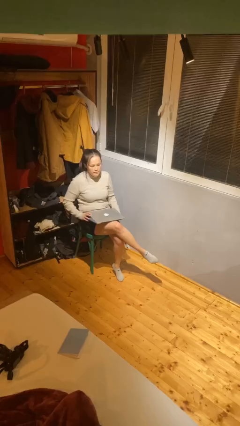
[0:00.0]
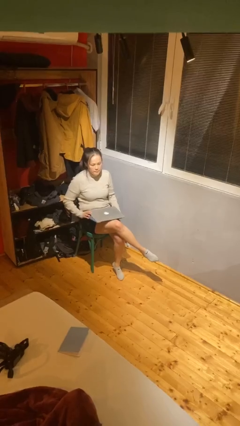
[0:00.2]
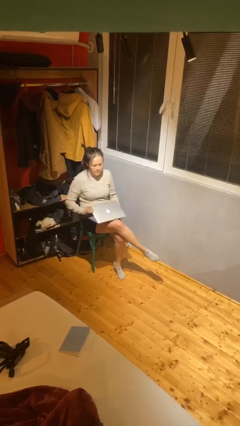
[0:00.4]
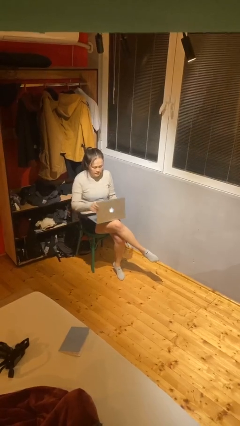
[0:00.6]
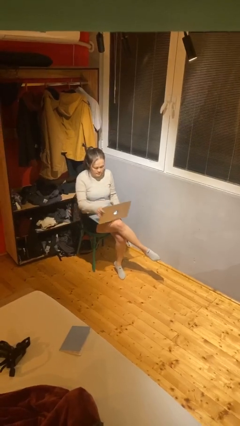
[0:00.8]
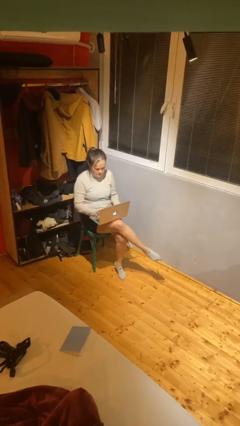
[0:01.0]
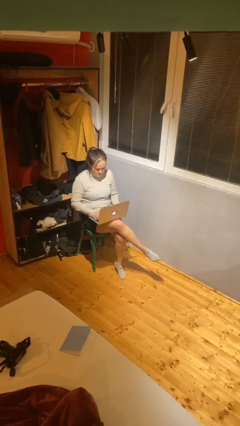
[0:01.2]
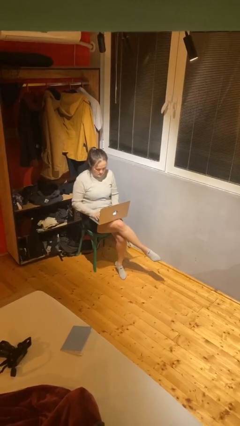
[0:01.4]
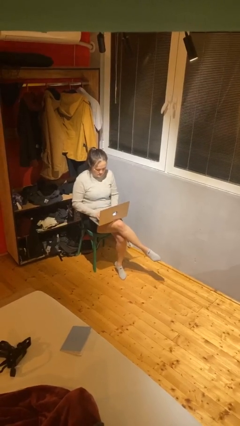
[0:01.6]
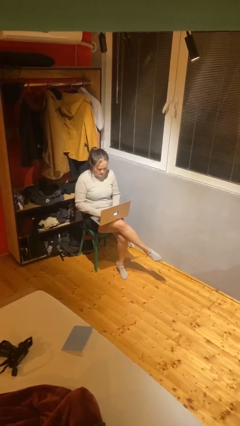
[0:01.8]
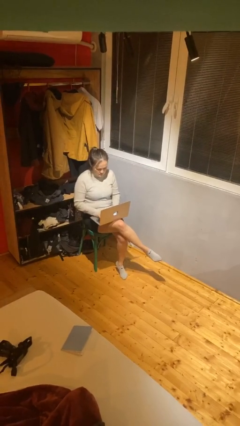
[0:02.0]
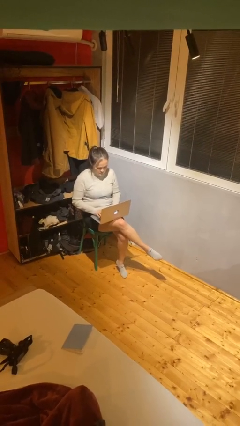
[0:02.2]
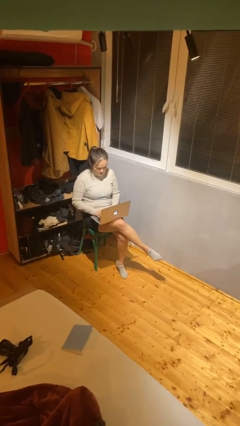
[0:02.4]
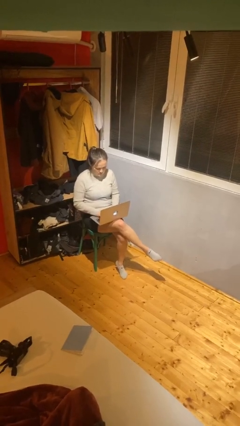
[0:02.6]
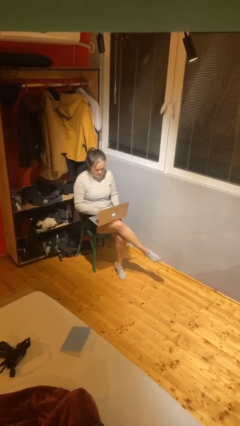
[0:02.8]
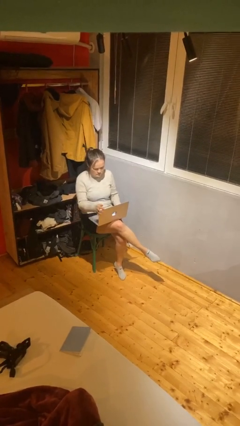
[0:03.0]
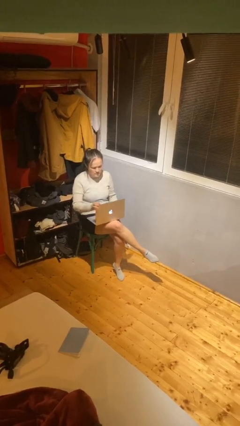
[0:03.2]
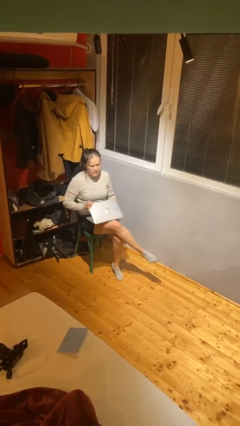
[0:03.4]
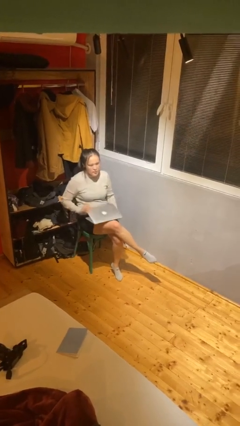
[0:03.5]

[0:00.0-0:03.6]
person interacts with laptop

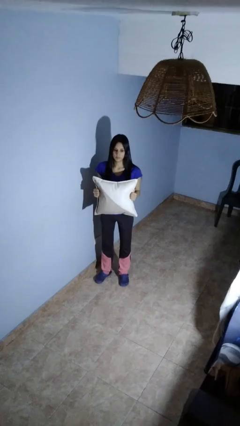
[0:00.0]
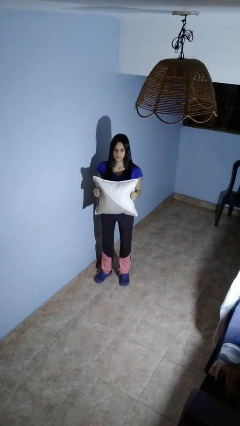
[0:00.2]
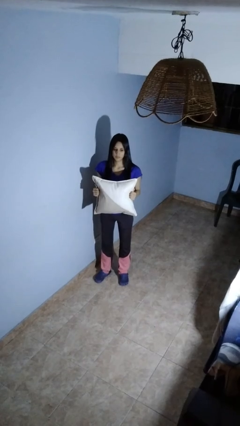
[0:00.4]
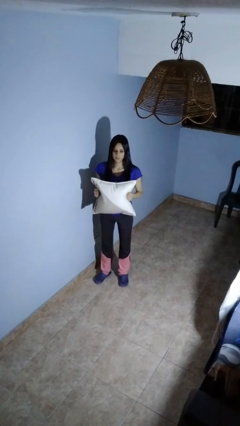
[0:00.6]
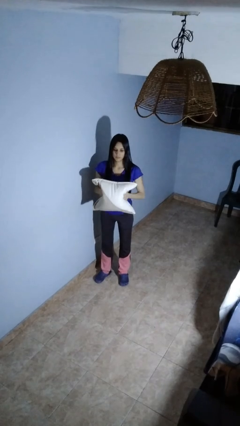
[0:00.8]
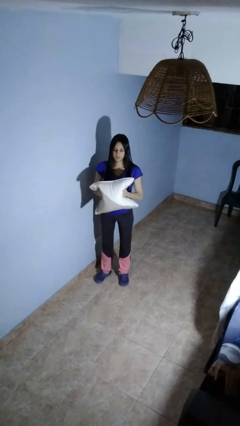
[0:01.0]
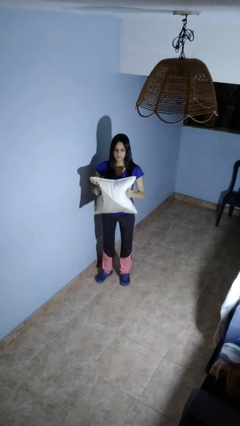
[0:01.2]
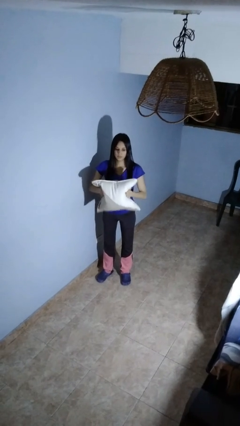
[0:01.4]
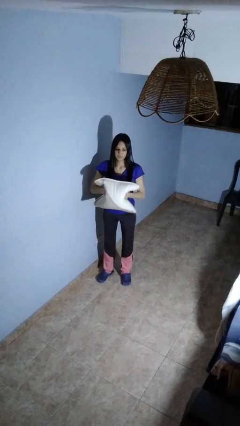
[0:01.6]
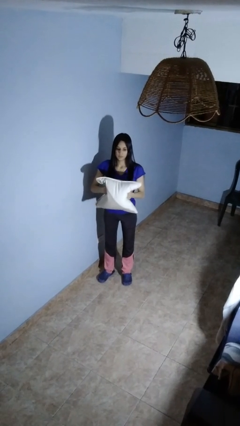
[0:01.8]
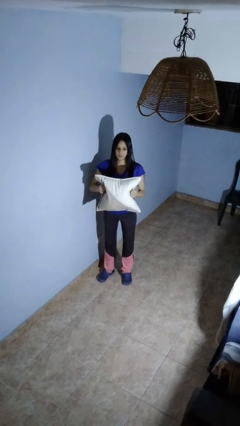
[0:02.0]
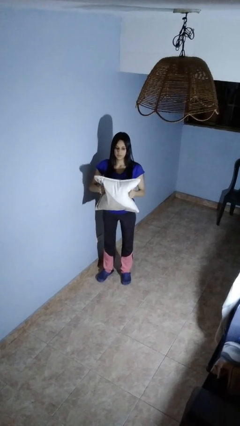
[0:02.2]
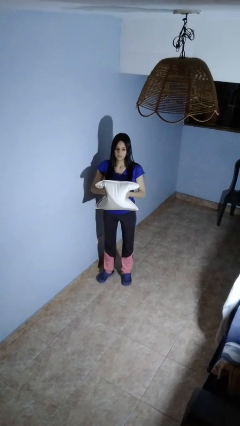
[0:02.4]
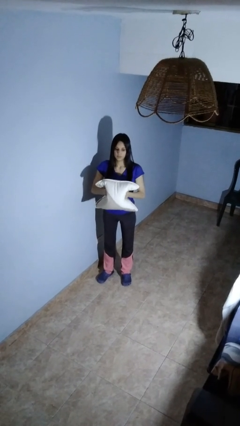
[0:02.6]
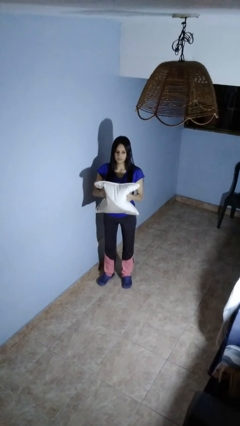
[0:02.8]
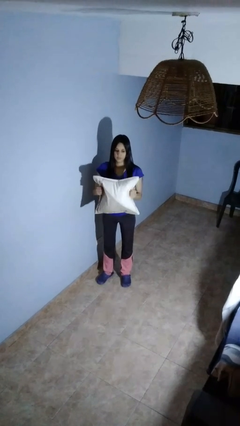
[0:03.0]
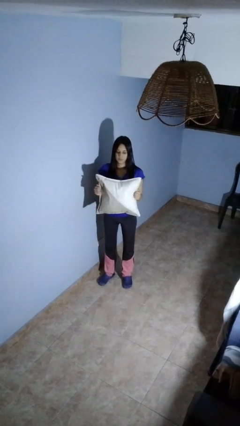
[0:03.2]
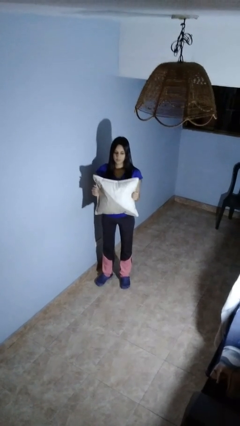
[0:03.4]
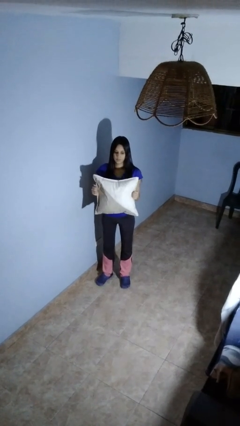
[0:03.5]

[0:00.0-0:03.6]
person waves hand over object

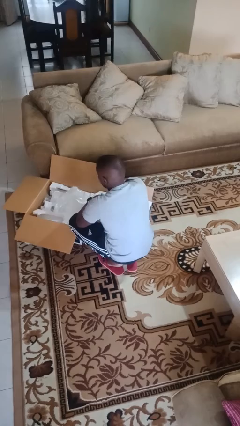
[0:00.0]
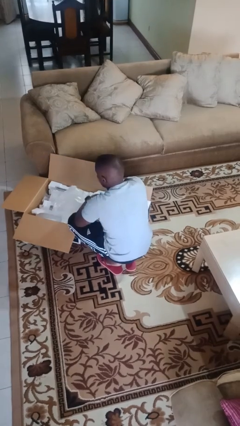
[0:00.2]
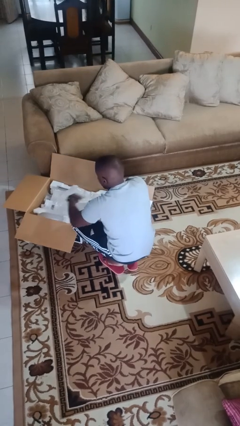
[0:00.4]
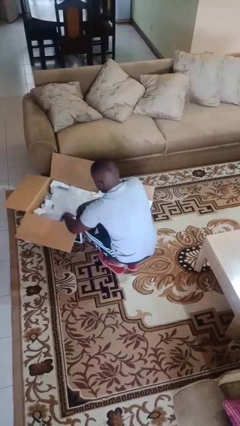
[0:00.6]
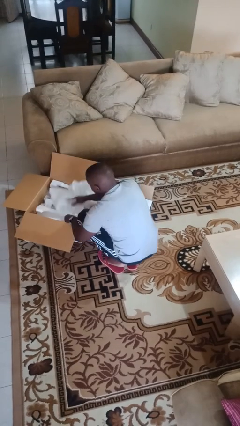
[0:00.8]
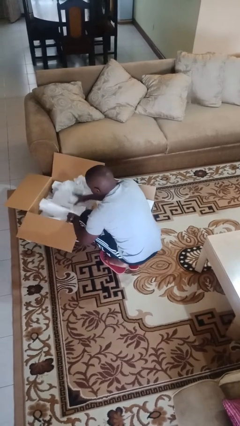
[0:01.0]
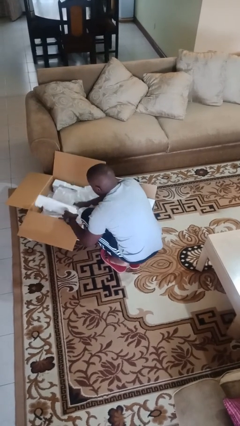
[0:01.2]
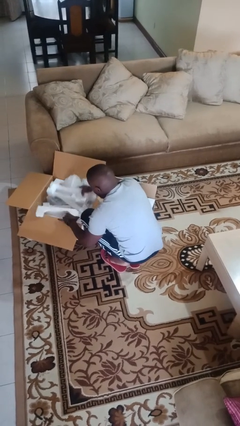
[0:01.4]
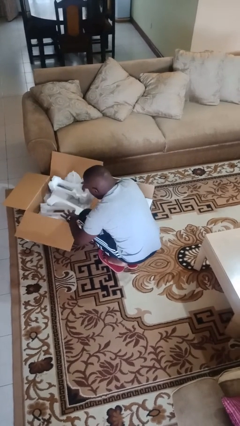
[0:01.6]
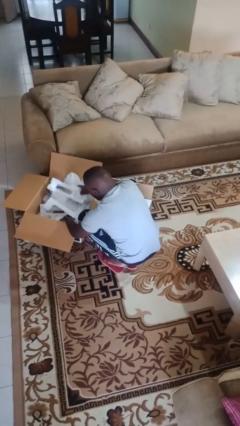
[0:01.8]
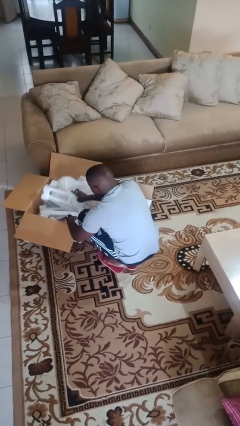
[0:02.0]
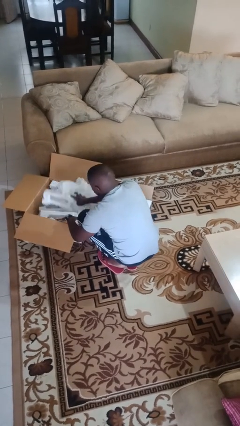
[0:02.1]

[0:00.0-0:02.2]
person searches in box

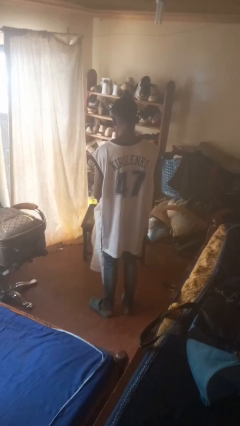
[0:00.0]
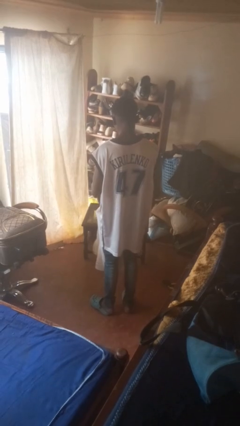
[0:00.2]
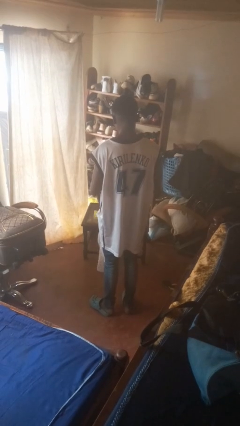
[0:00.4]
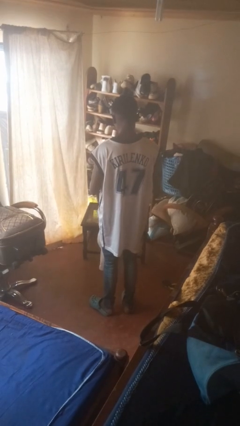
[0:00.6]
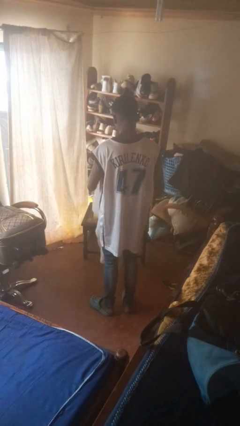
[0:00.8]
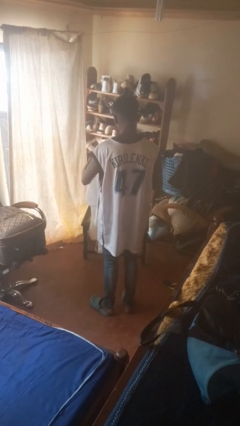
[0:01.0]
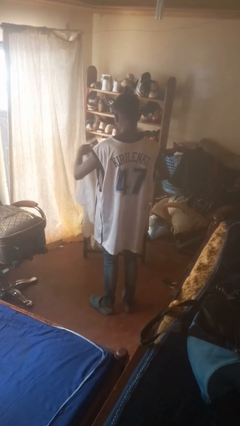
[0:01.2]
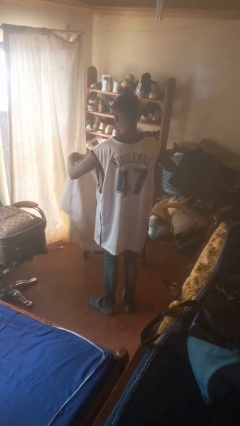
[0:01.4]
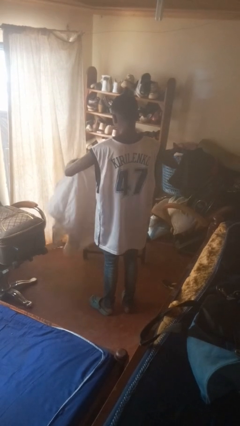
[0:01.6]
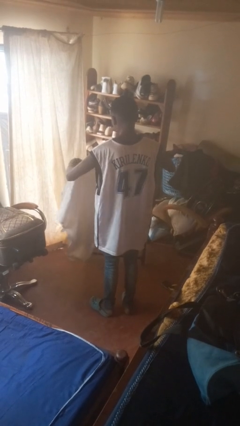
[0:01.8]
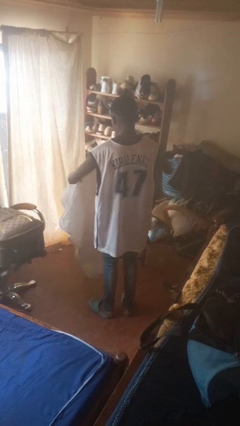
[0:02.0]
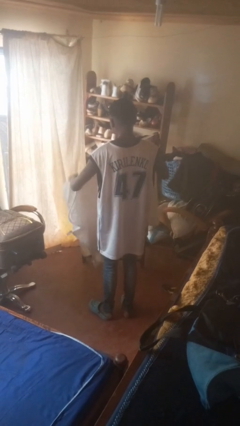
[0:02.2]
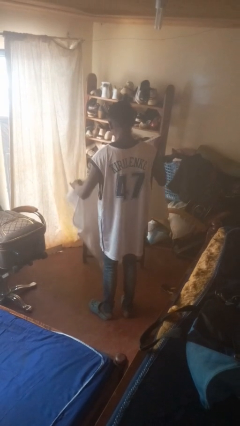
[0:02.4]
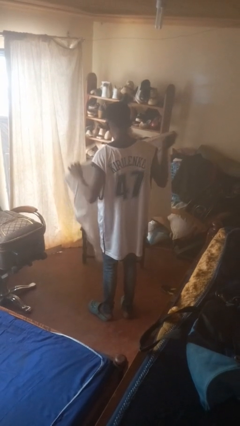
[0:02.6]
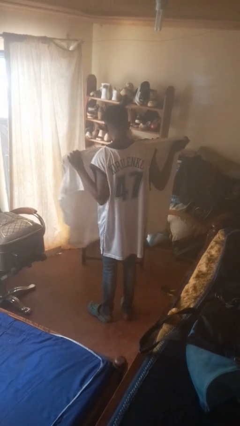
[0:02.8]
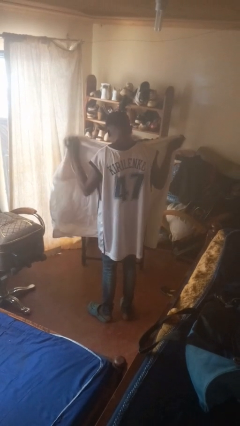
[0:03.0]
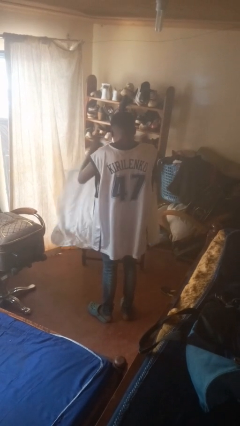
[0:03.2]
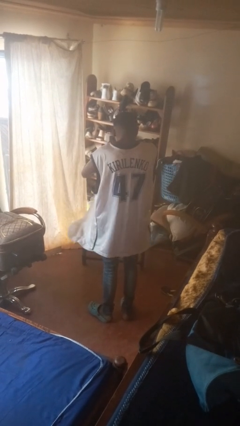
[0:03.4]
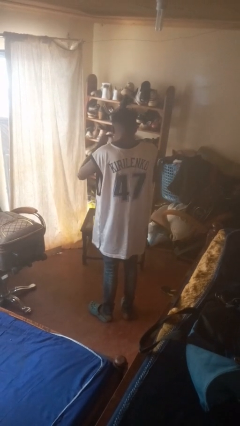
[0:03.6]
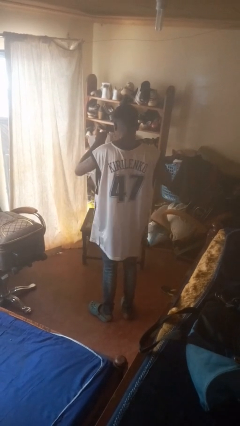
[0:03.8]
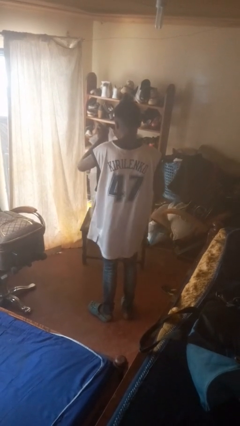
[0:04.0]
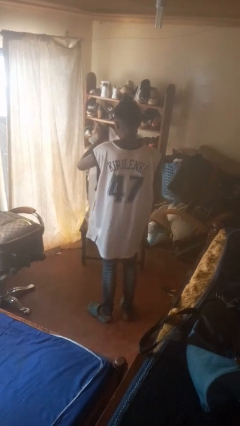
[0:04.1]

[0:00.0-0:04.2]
person folds blanket

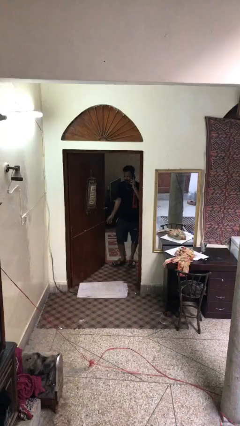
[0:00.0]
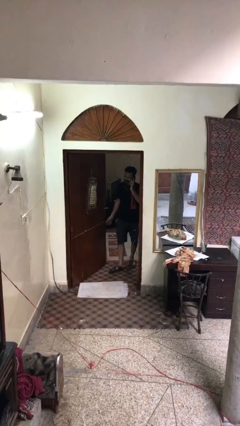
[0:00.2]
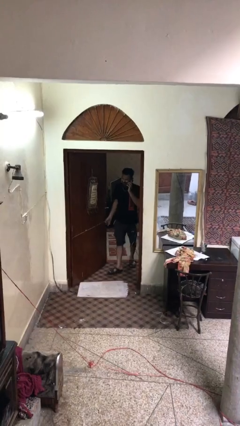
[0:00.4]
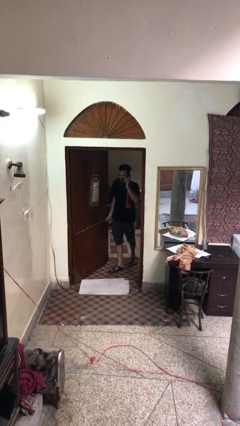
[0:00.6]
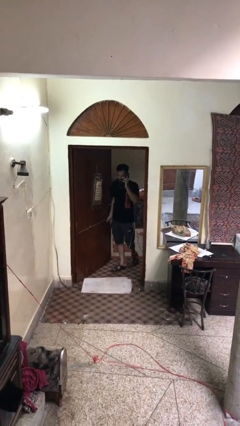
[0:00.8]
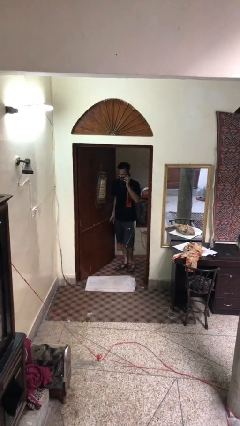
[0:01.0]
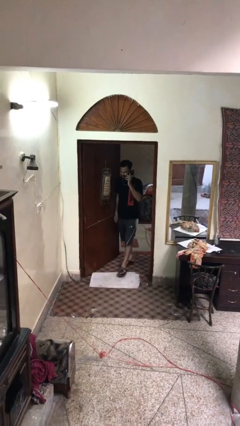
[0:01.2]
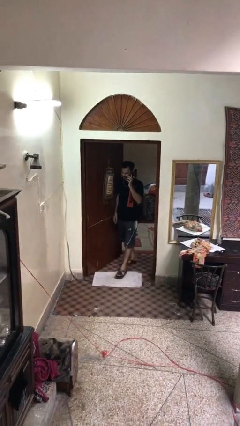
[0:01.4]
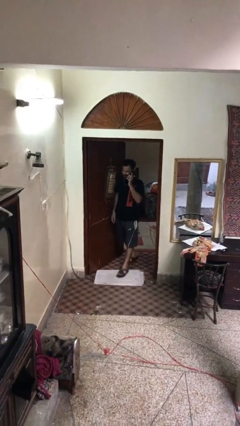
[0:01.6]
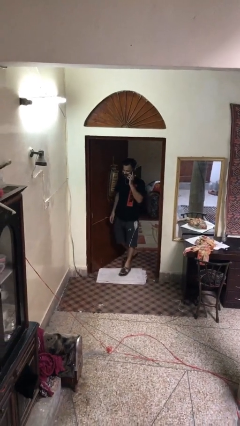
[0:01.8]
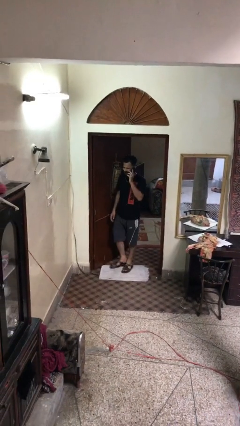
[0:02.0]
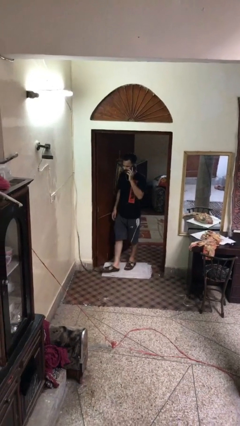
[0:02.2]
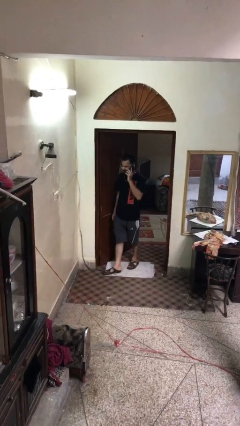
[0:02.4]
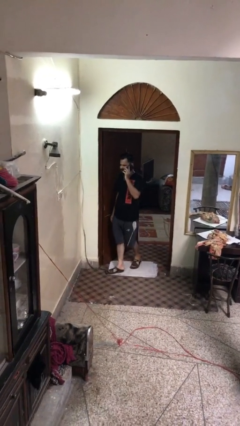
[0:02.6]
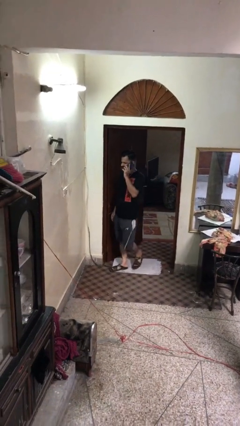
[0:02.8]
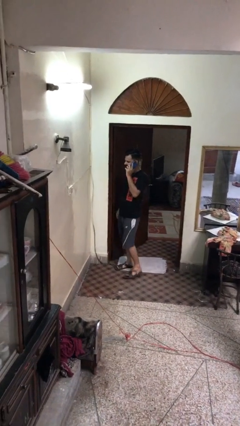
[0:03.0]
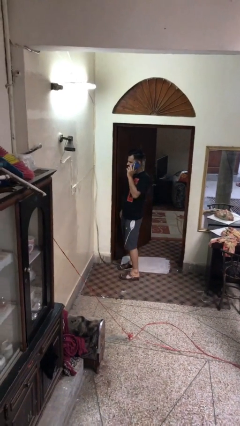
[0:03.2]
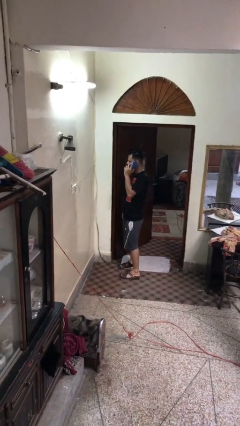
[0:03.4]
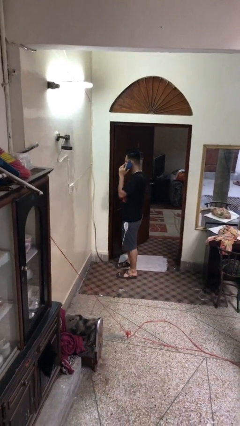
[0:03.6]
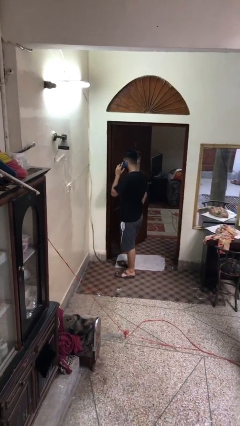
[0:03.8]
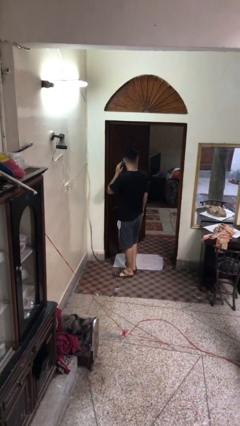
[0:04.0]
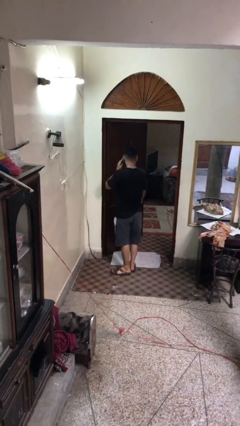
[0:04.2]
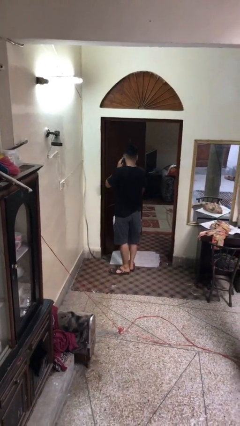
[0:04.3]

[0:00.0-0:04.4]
person enters scene through structure
